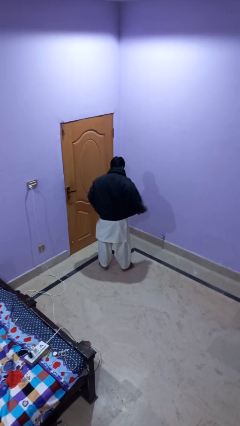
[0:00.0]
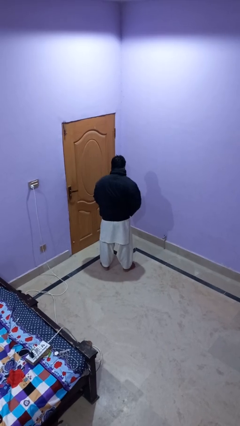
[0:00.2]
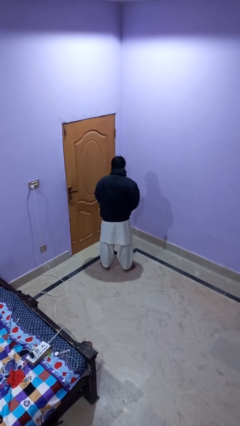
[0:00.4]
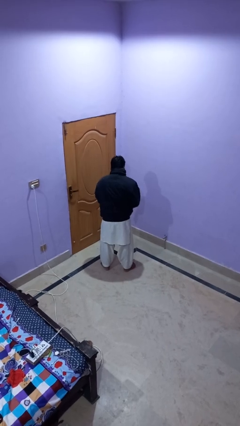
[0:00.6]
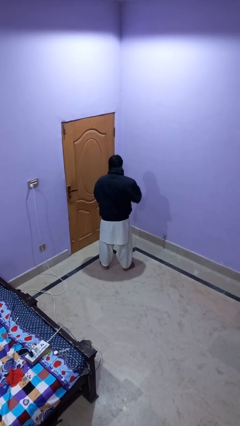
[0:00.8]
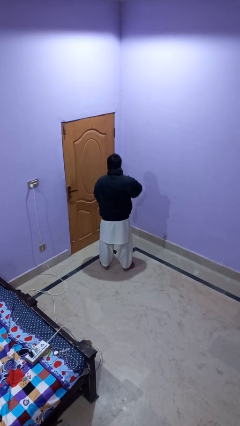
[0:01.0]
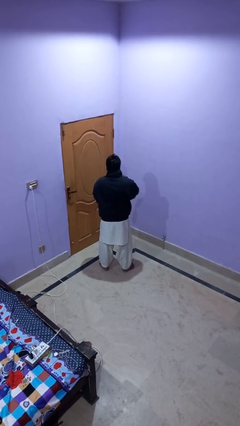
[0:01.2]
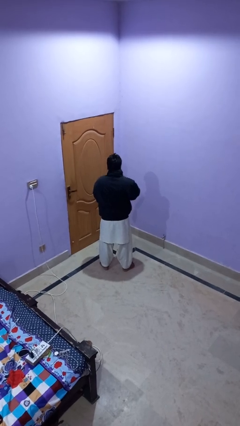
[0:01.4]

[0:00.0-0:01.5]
person zips up jacket

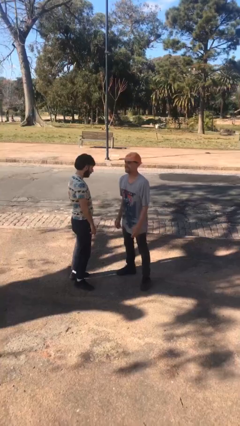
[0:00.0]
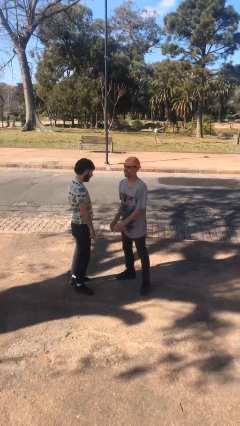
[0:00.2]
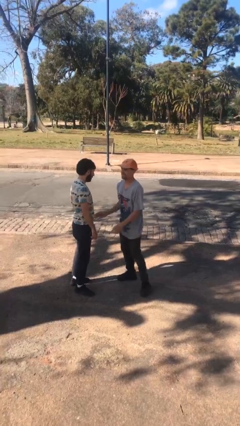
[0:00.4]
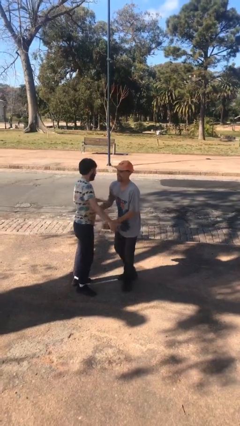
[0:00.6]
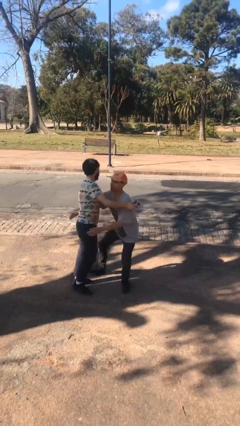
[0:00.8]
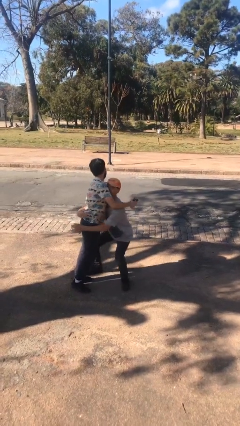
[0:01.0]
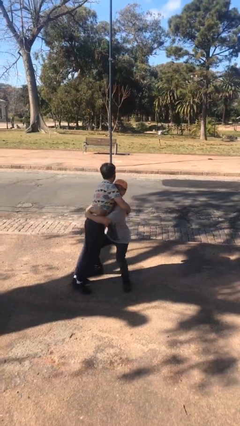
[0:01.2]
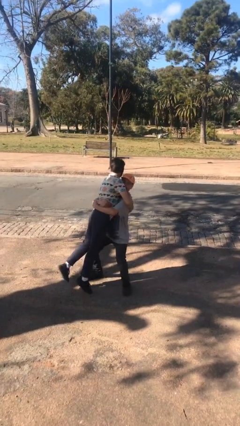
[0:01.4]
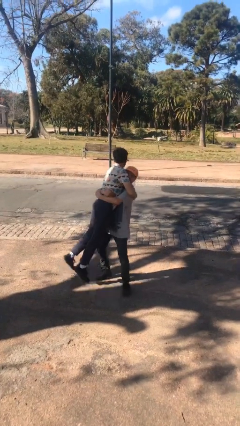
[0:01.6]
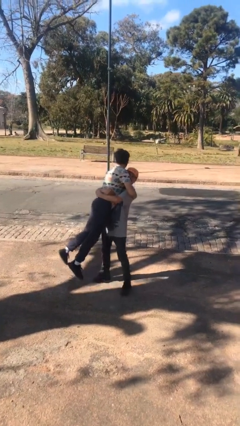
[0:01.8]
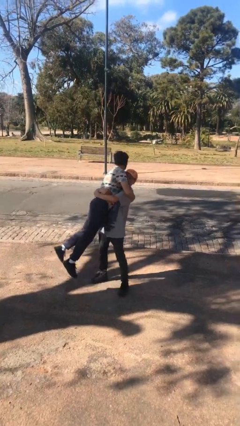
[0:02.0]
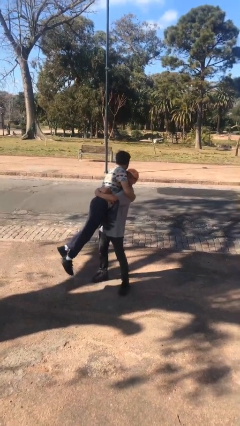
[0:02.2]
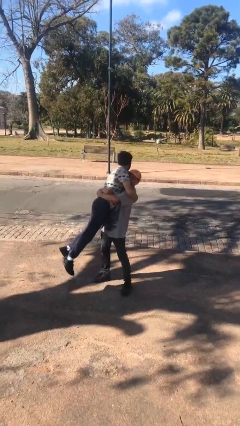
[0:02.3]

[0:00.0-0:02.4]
person picks up person

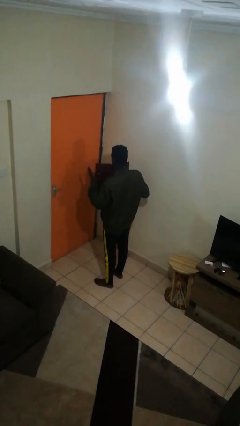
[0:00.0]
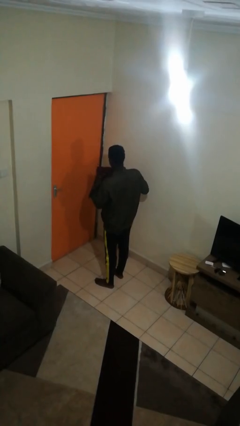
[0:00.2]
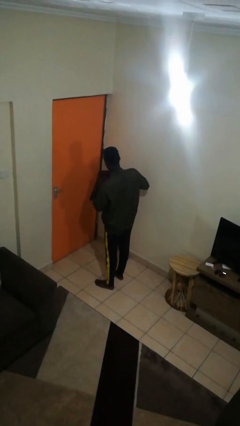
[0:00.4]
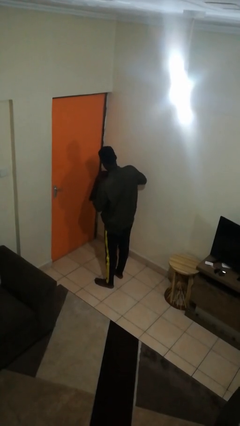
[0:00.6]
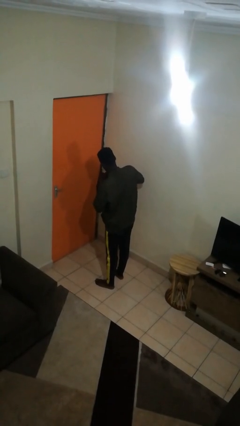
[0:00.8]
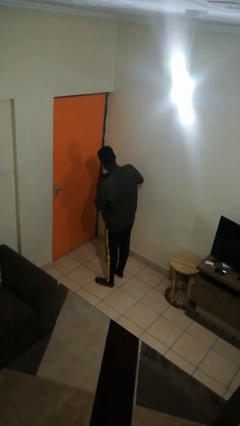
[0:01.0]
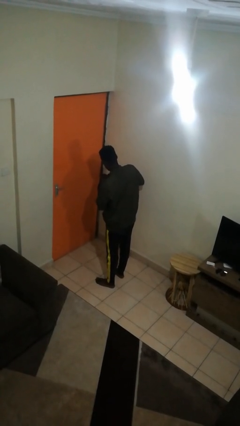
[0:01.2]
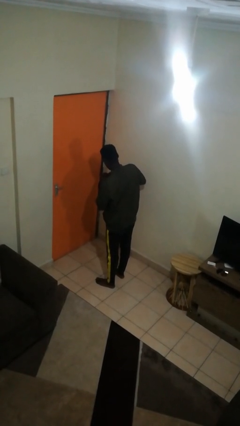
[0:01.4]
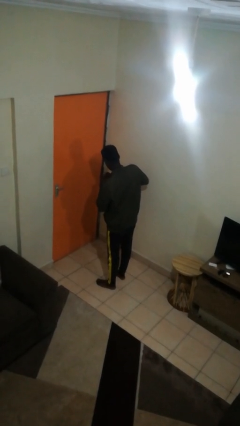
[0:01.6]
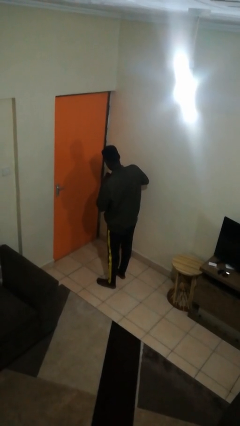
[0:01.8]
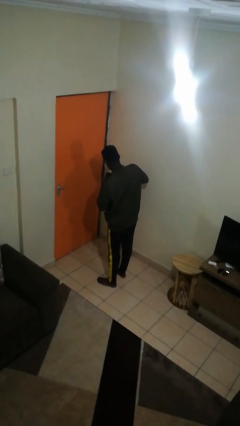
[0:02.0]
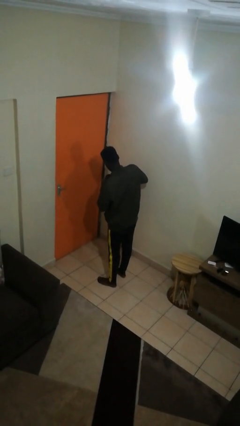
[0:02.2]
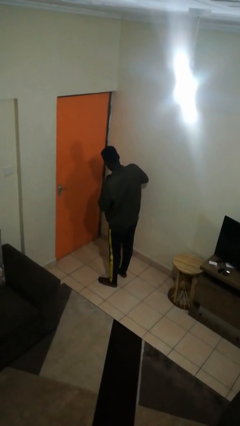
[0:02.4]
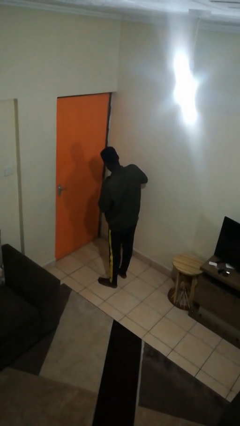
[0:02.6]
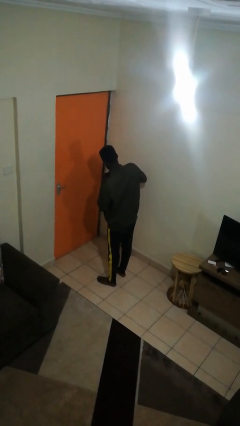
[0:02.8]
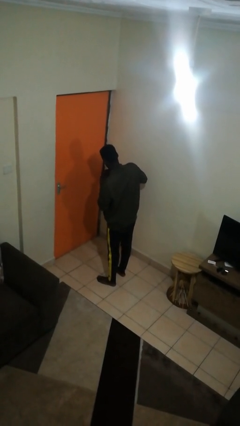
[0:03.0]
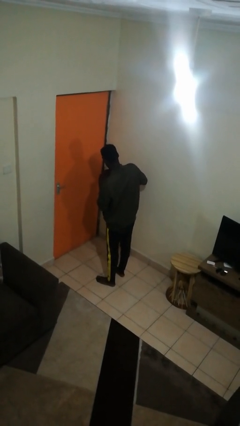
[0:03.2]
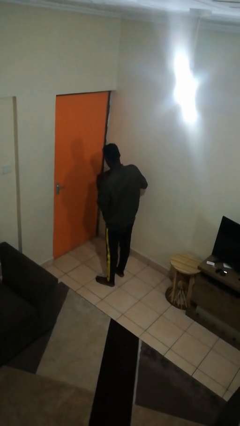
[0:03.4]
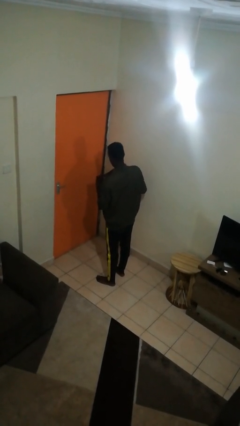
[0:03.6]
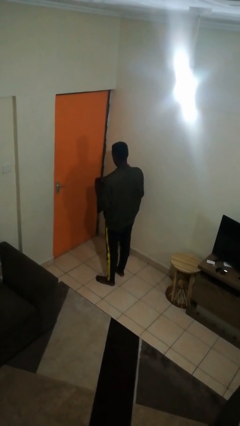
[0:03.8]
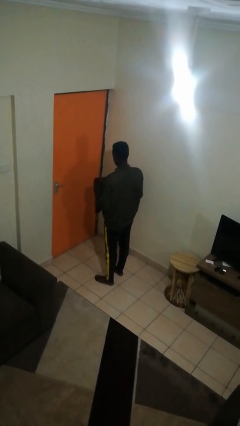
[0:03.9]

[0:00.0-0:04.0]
person squeezes object

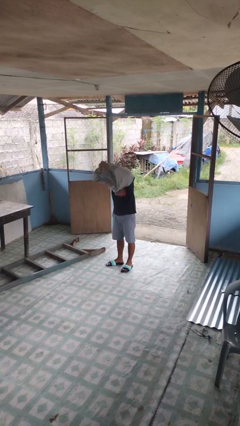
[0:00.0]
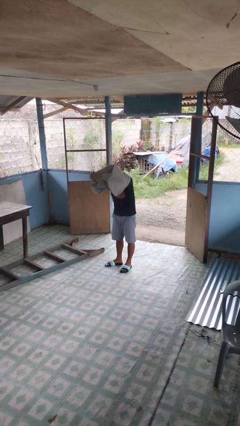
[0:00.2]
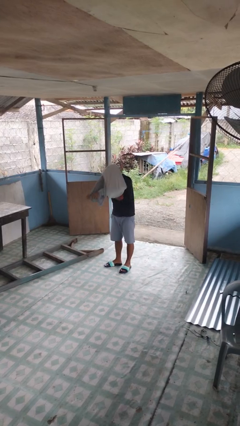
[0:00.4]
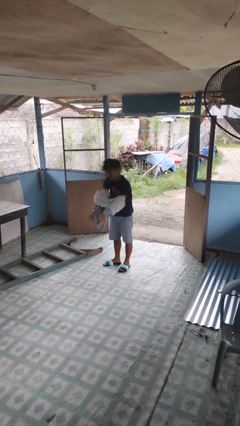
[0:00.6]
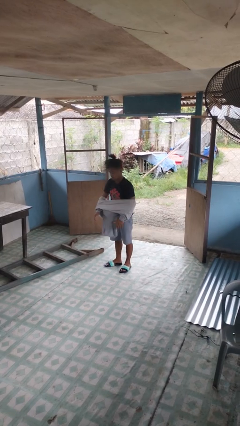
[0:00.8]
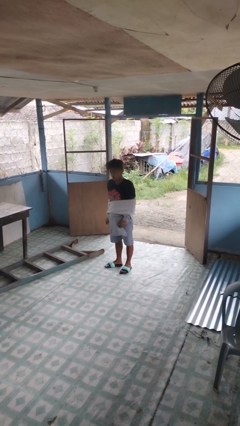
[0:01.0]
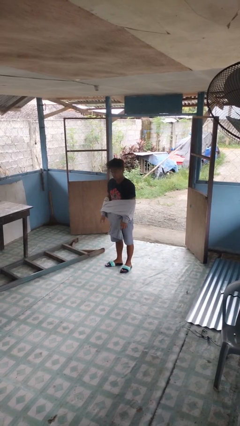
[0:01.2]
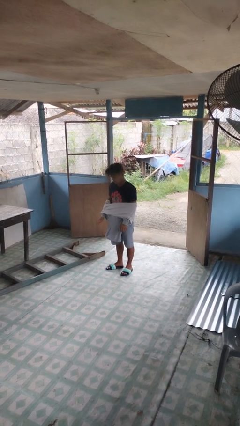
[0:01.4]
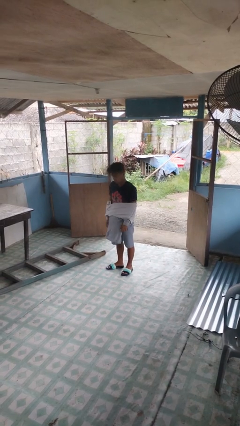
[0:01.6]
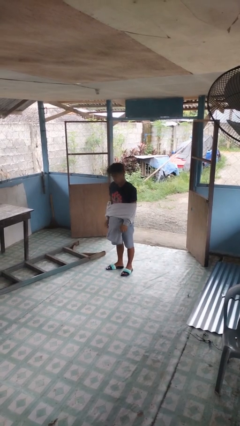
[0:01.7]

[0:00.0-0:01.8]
person takes off hoodie

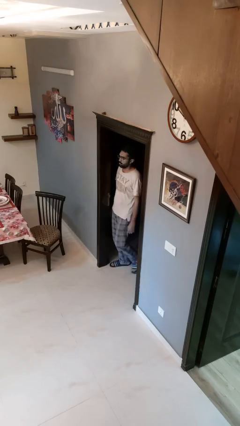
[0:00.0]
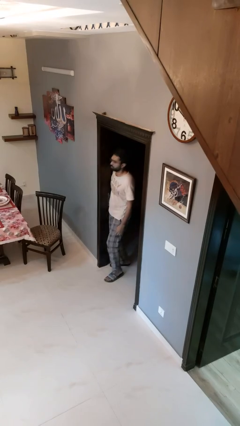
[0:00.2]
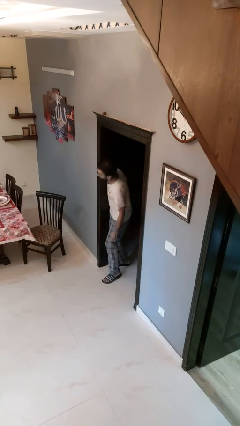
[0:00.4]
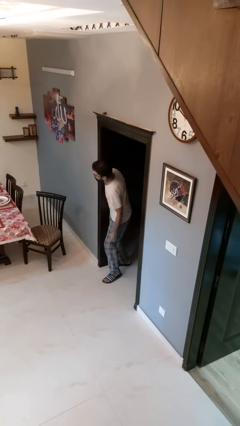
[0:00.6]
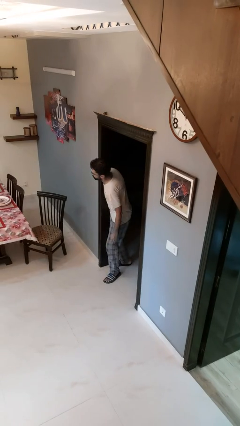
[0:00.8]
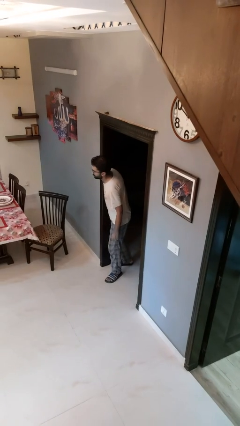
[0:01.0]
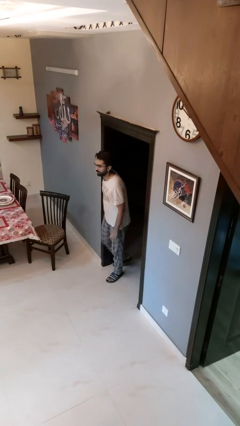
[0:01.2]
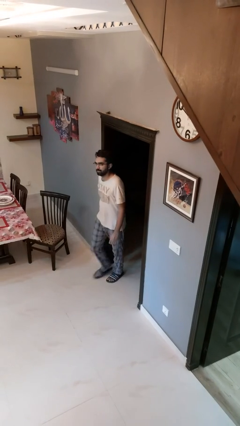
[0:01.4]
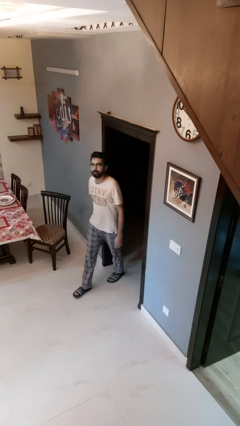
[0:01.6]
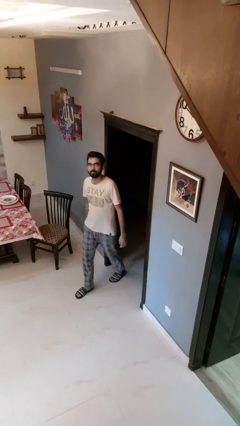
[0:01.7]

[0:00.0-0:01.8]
person bumps into wall

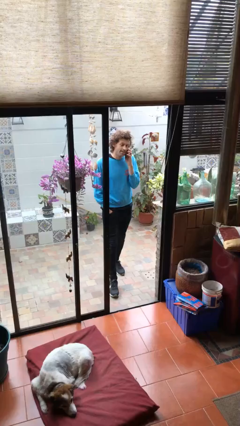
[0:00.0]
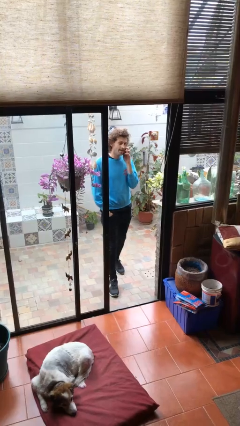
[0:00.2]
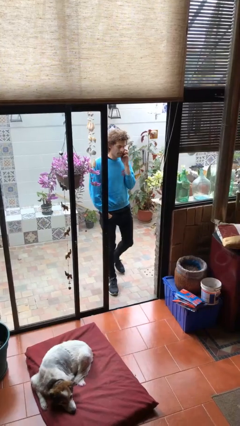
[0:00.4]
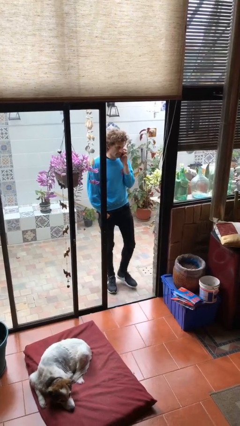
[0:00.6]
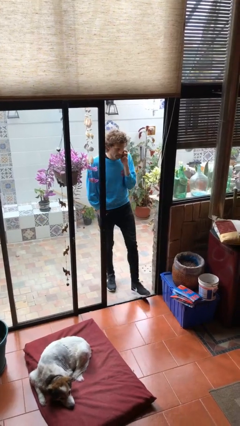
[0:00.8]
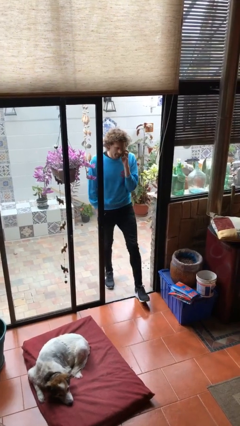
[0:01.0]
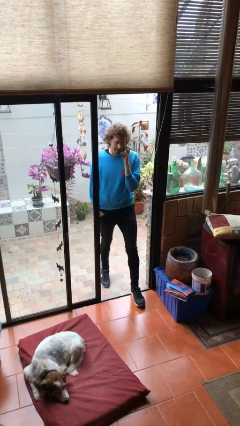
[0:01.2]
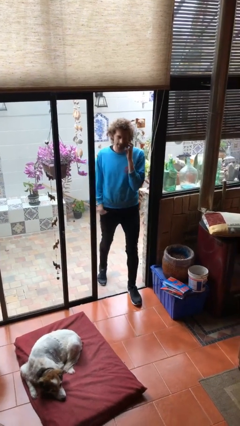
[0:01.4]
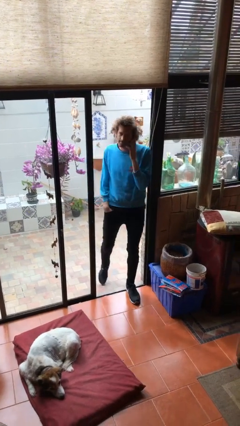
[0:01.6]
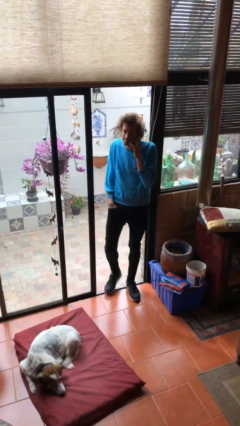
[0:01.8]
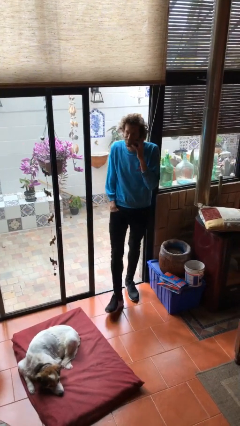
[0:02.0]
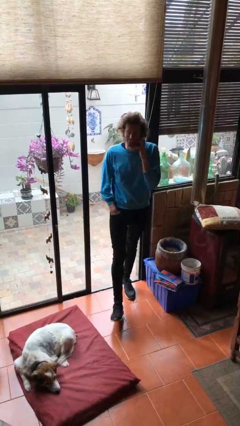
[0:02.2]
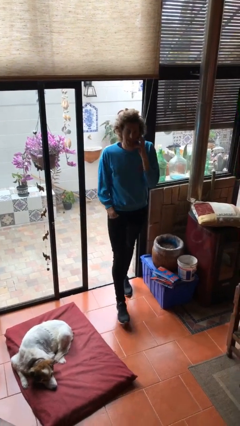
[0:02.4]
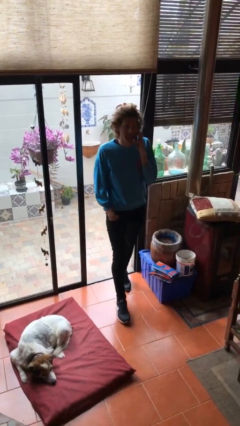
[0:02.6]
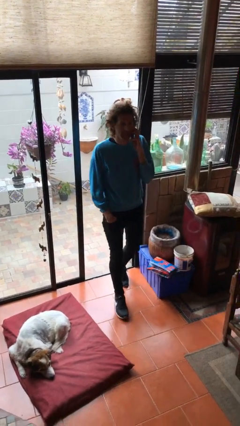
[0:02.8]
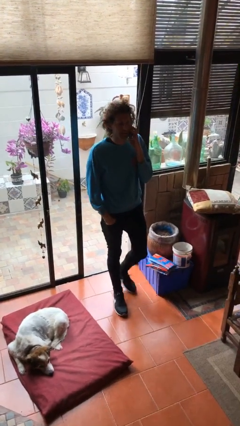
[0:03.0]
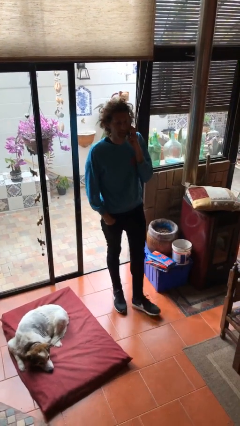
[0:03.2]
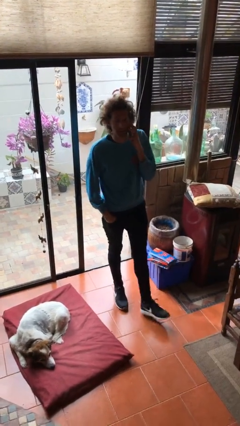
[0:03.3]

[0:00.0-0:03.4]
person enters scene through structure

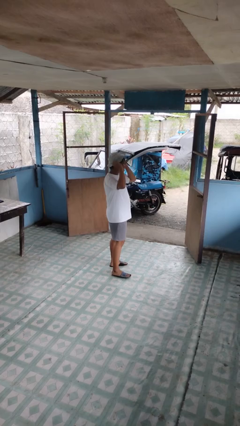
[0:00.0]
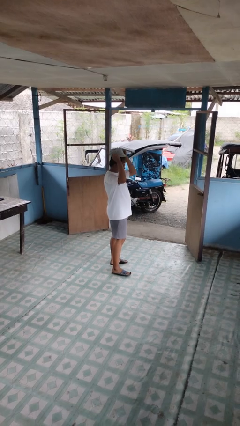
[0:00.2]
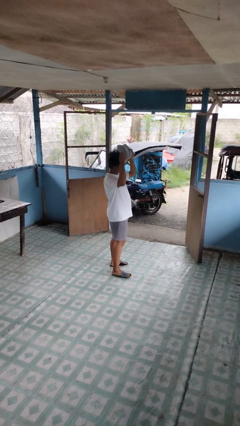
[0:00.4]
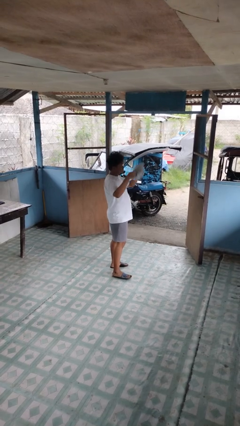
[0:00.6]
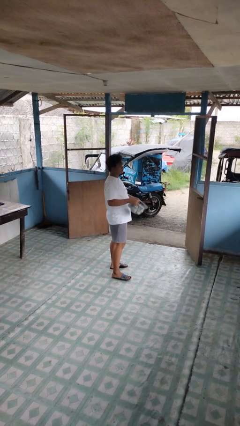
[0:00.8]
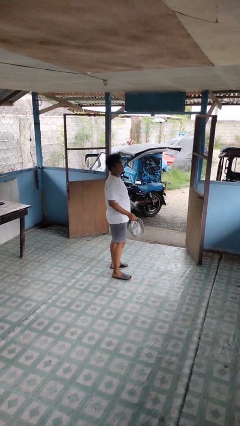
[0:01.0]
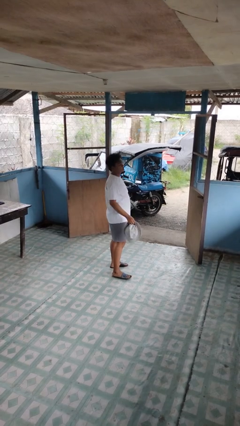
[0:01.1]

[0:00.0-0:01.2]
person takes off hat

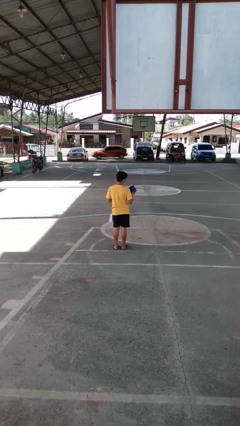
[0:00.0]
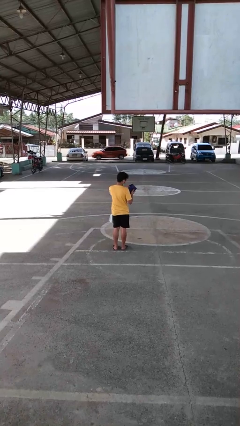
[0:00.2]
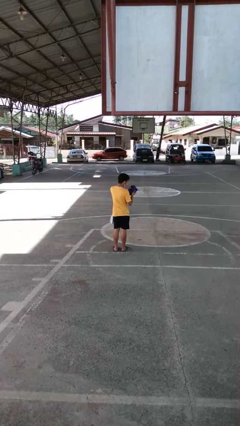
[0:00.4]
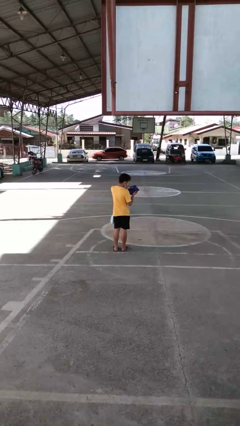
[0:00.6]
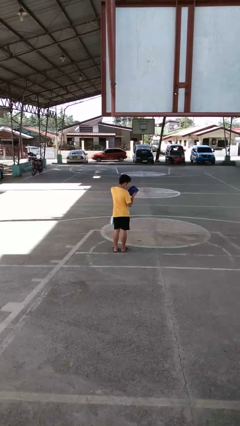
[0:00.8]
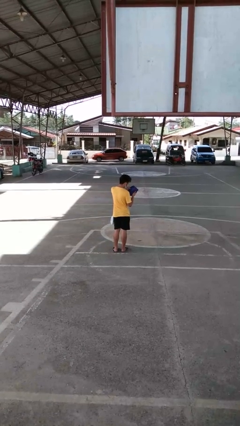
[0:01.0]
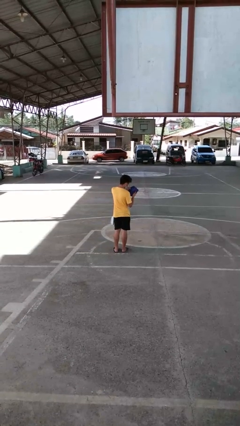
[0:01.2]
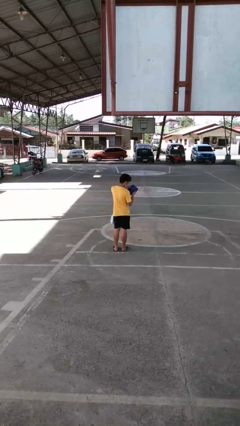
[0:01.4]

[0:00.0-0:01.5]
person takes off glasses
